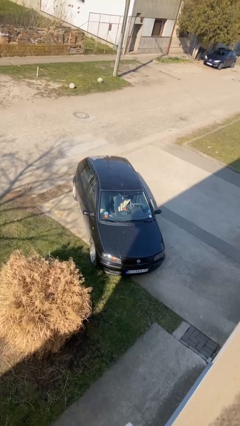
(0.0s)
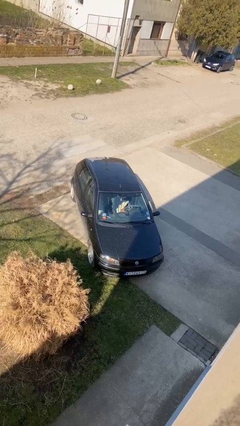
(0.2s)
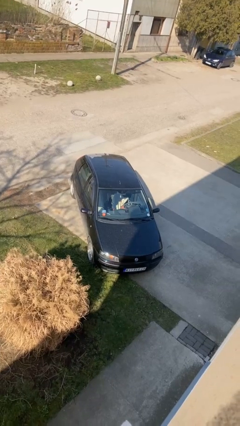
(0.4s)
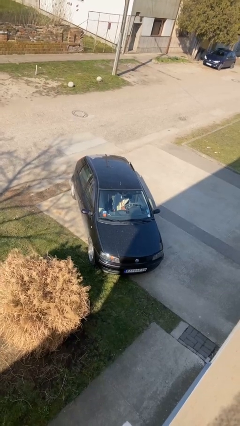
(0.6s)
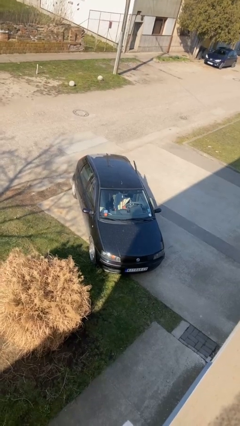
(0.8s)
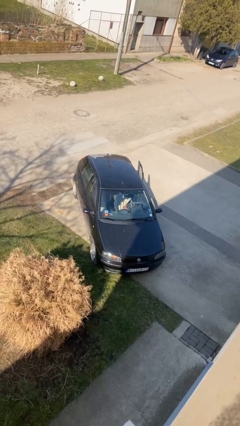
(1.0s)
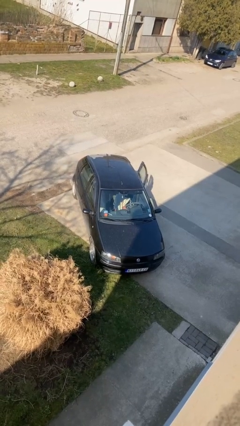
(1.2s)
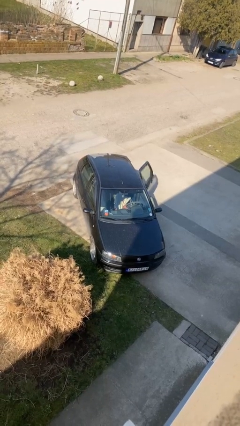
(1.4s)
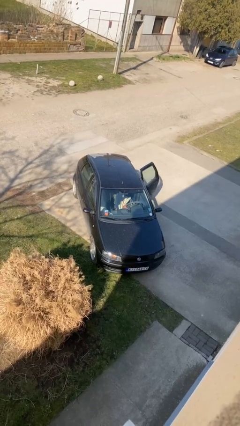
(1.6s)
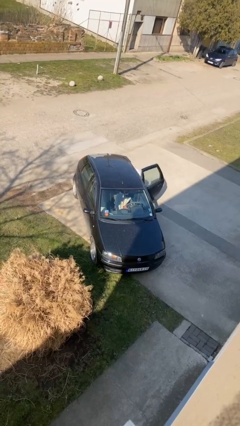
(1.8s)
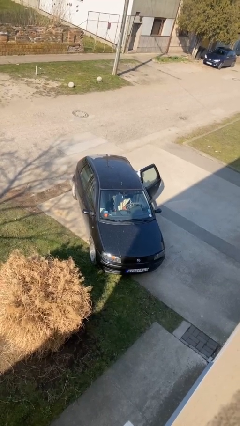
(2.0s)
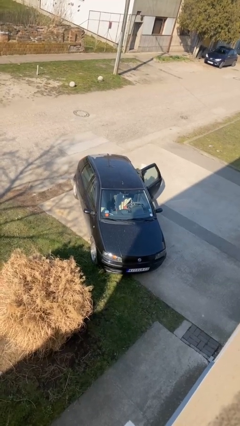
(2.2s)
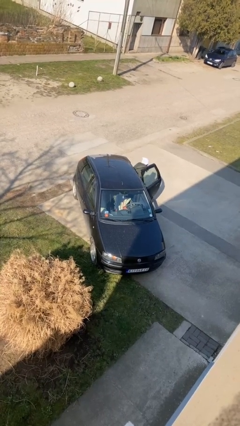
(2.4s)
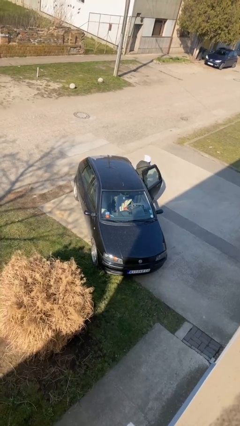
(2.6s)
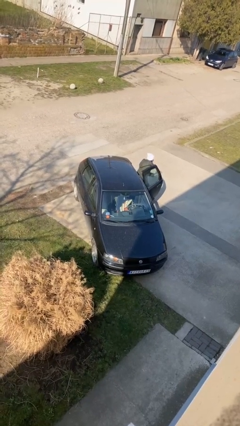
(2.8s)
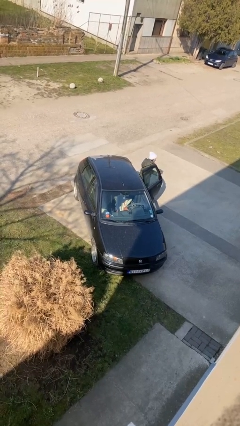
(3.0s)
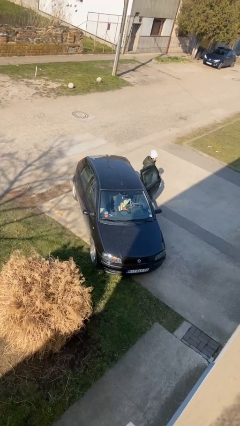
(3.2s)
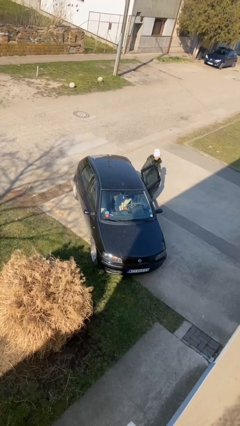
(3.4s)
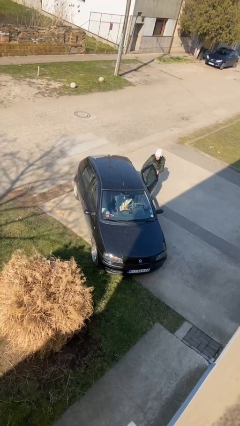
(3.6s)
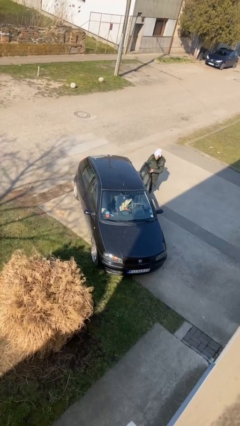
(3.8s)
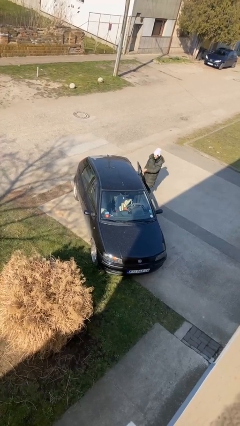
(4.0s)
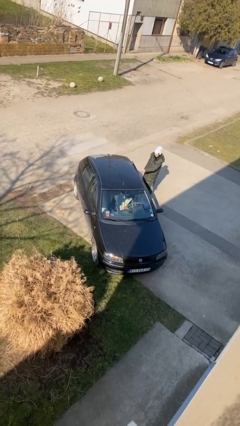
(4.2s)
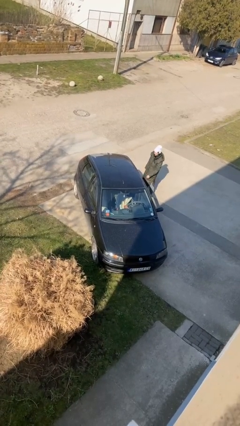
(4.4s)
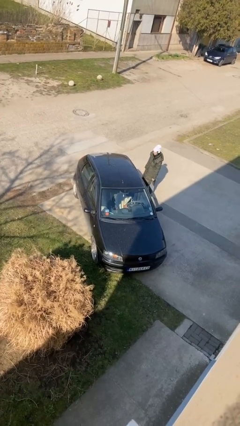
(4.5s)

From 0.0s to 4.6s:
car drops off person

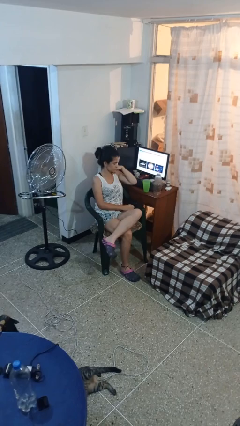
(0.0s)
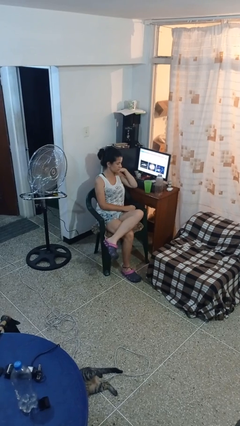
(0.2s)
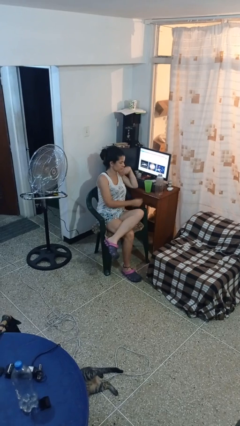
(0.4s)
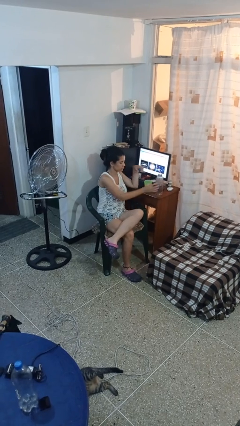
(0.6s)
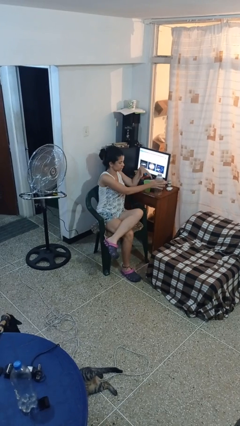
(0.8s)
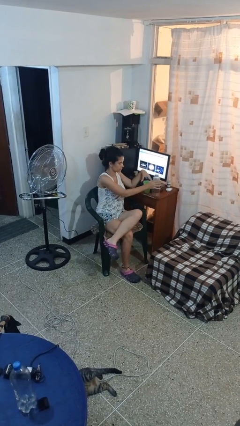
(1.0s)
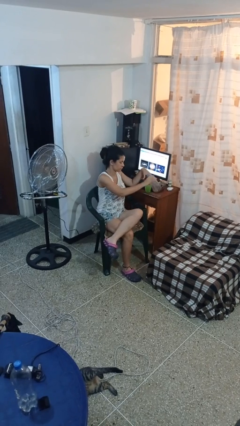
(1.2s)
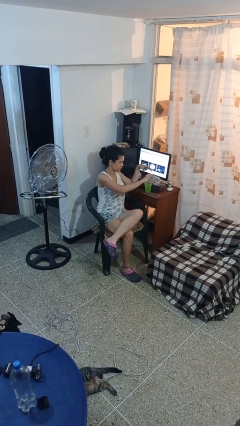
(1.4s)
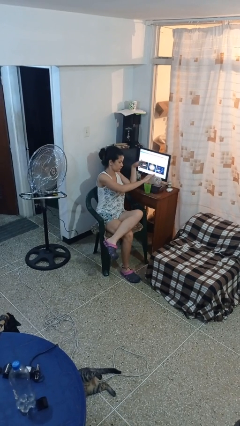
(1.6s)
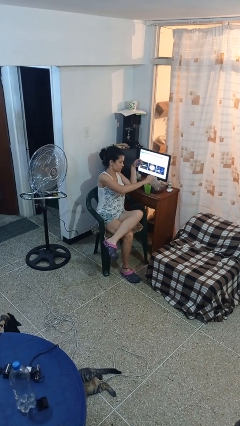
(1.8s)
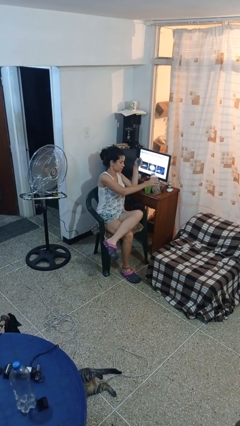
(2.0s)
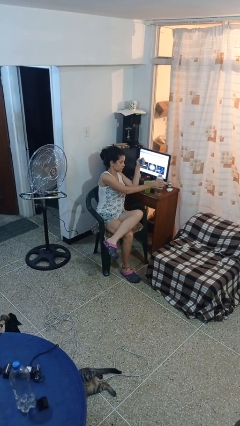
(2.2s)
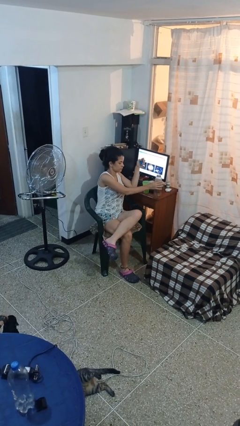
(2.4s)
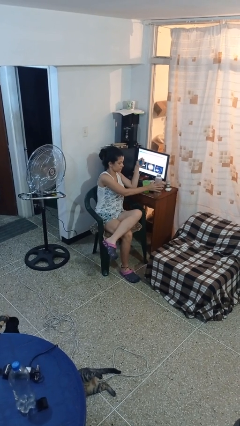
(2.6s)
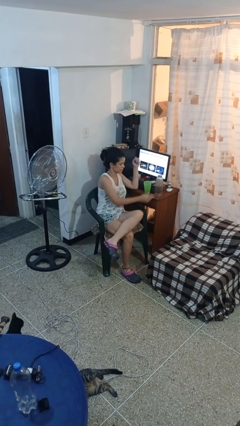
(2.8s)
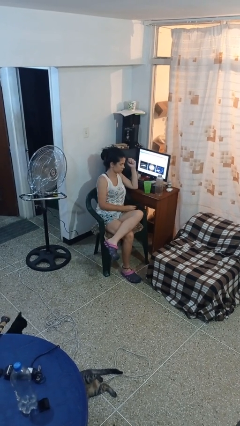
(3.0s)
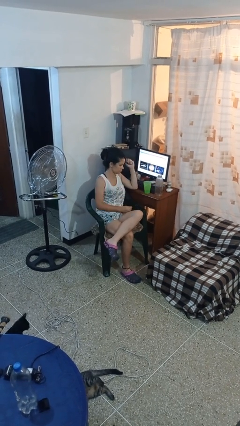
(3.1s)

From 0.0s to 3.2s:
person pours liquid into cup

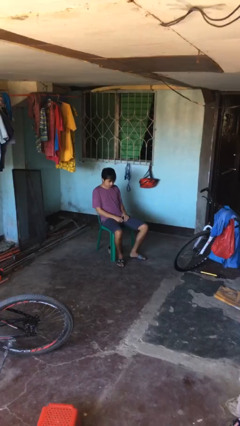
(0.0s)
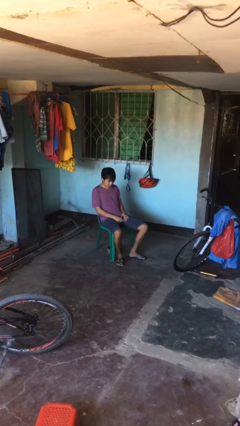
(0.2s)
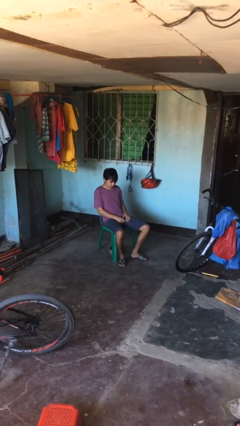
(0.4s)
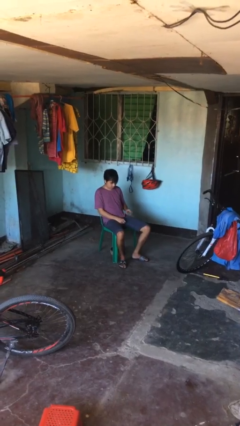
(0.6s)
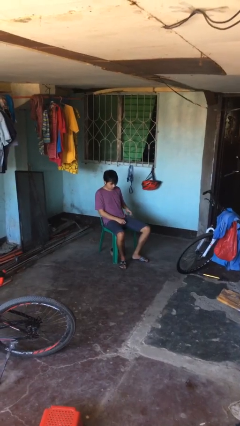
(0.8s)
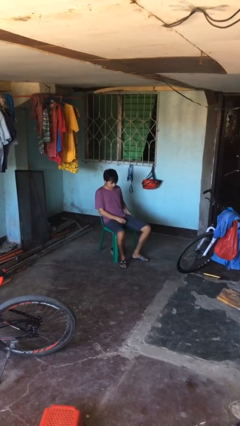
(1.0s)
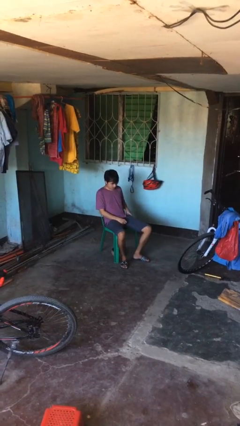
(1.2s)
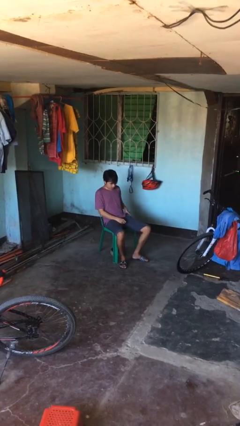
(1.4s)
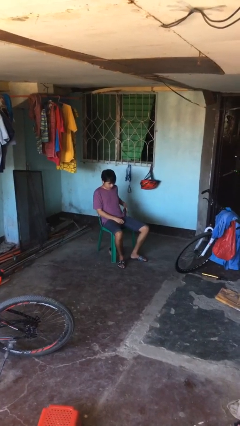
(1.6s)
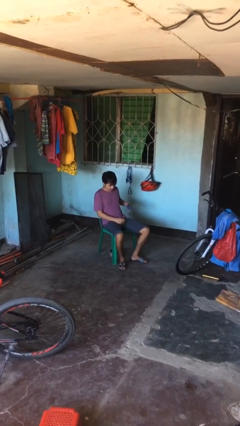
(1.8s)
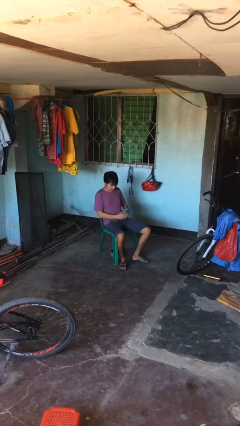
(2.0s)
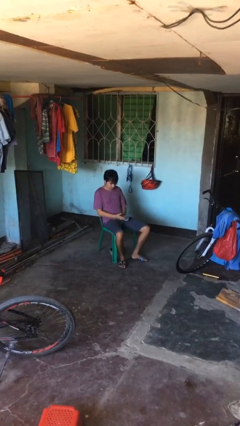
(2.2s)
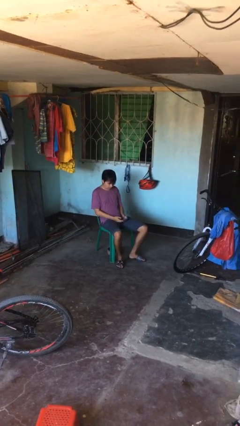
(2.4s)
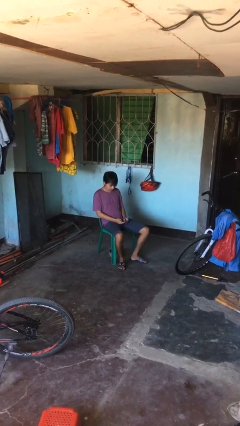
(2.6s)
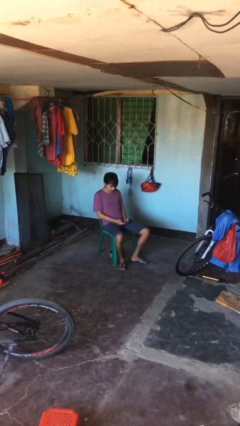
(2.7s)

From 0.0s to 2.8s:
person takes phone from pocket

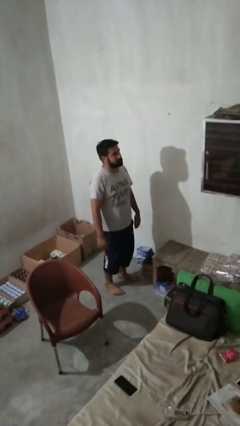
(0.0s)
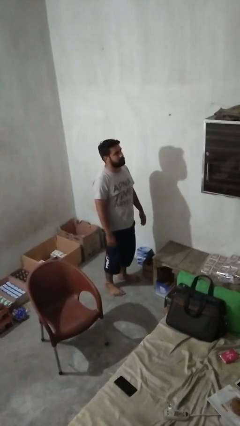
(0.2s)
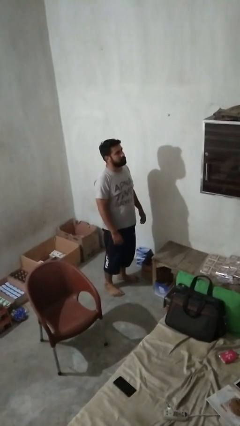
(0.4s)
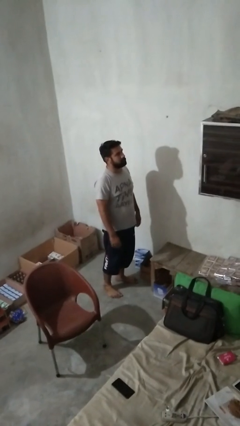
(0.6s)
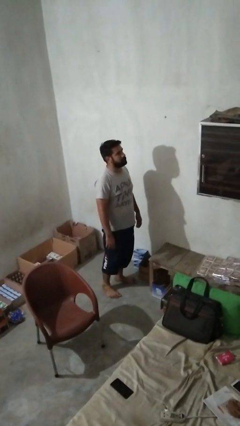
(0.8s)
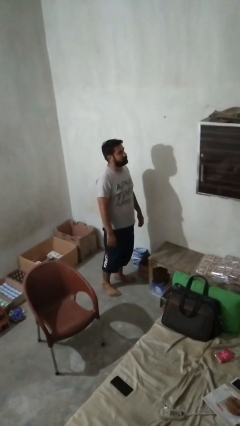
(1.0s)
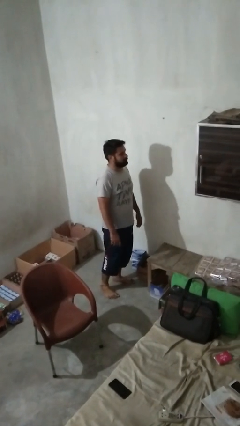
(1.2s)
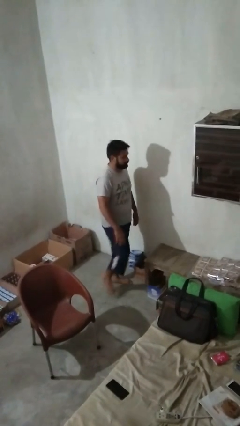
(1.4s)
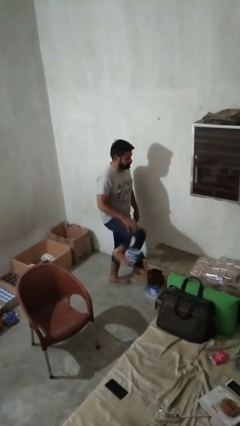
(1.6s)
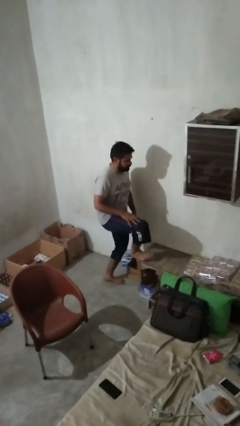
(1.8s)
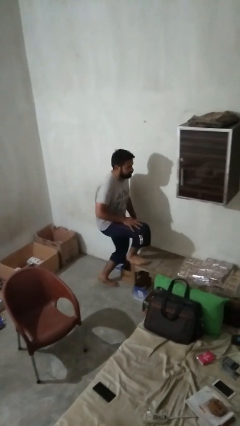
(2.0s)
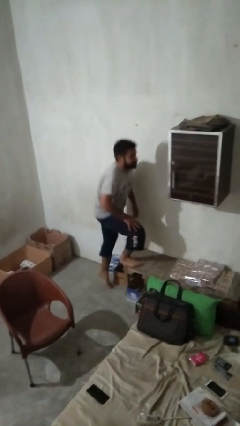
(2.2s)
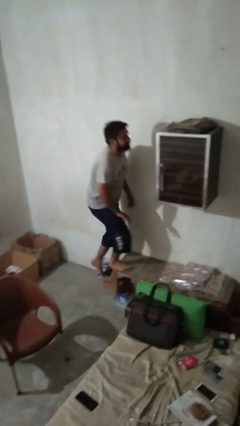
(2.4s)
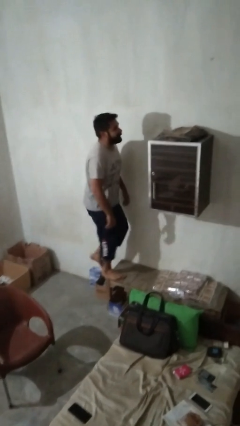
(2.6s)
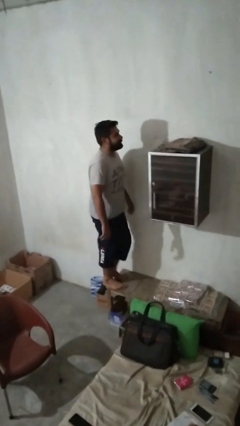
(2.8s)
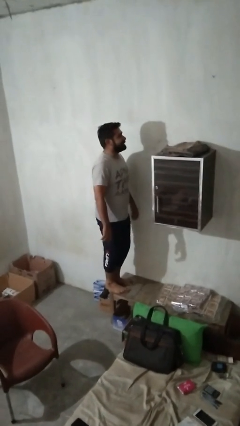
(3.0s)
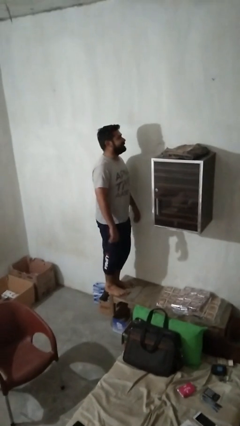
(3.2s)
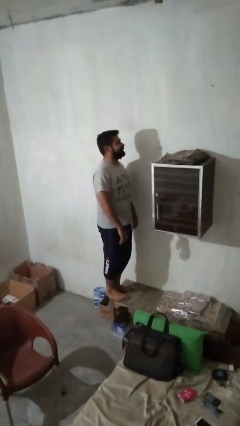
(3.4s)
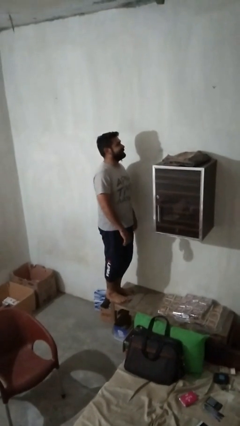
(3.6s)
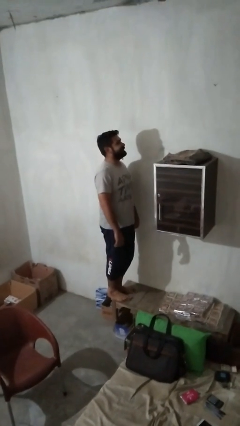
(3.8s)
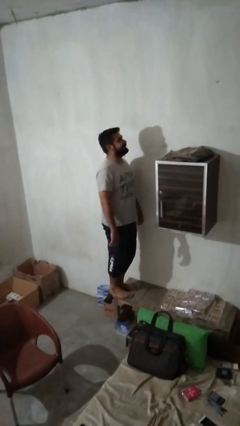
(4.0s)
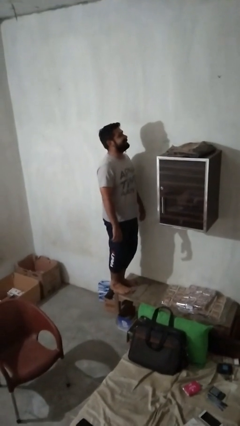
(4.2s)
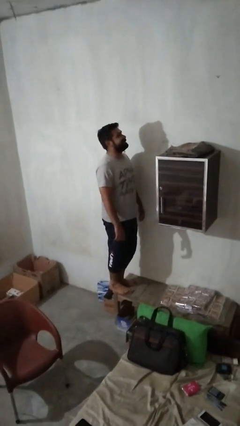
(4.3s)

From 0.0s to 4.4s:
person climbs on table

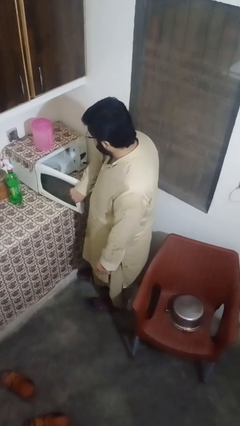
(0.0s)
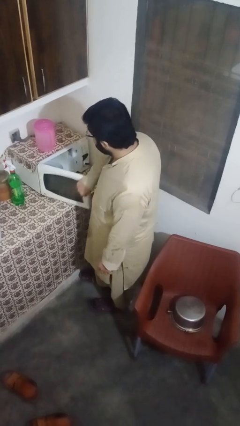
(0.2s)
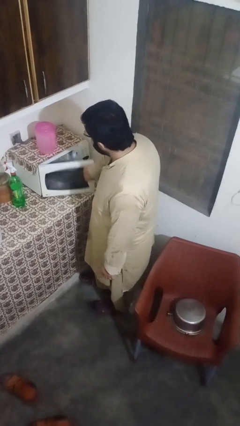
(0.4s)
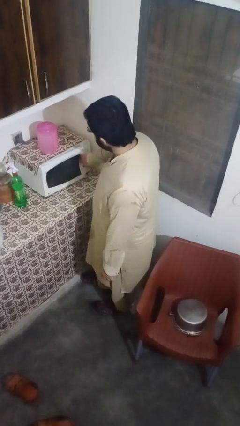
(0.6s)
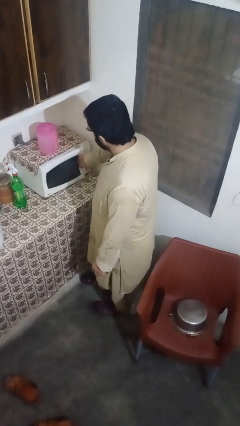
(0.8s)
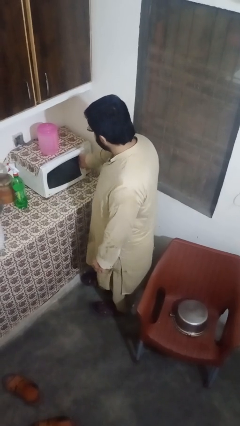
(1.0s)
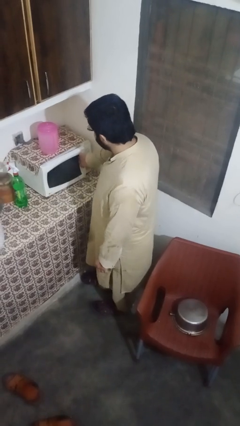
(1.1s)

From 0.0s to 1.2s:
person closes microwave

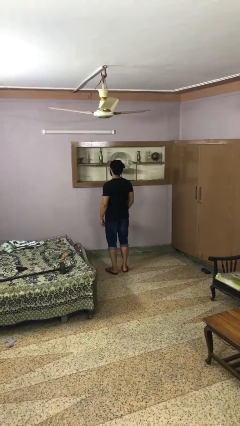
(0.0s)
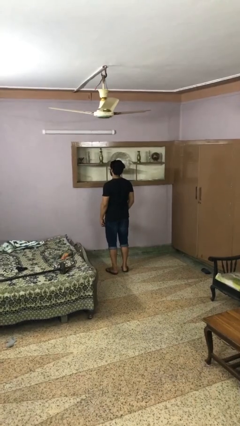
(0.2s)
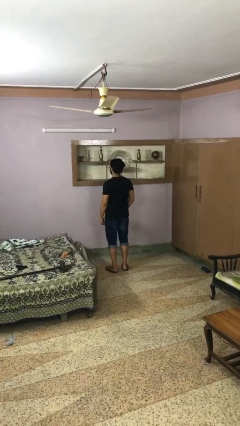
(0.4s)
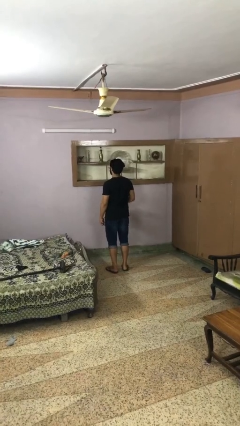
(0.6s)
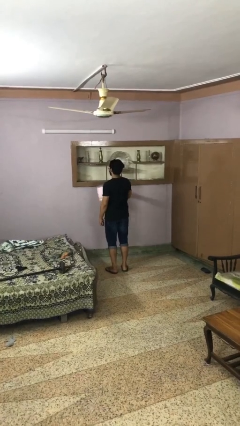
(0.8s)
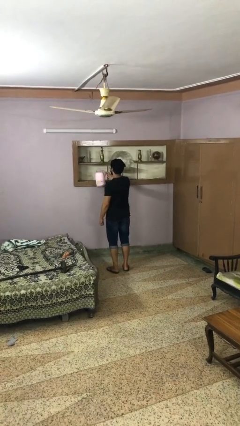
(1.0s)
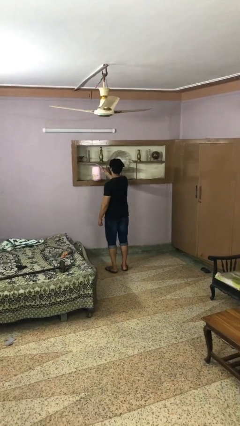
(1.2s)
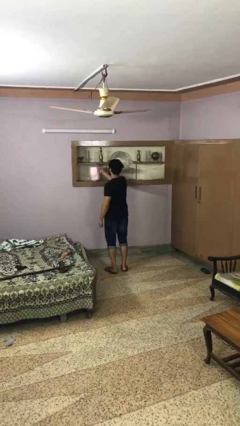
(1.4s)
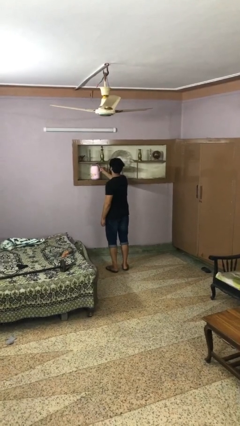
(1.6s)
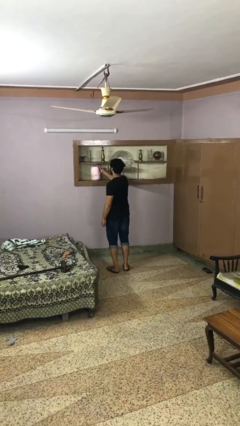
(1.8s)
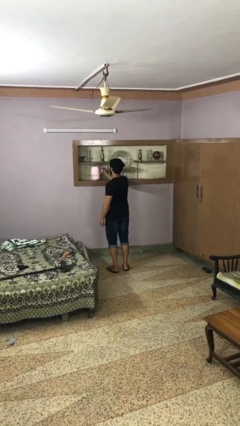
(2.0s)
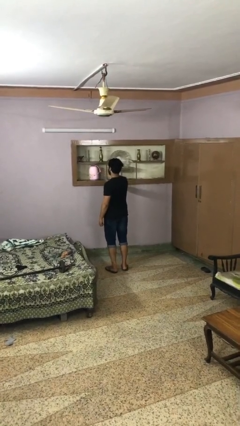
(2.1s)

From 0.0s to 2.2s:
person puts down object on countertop
